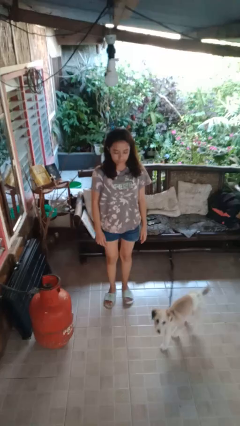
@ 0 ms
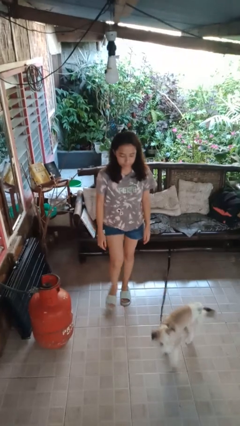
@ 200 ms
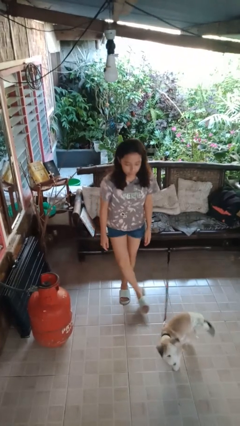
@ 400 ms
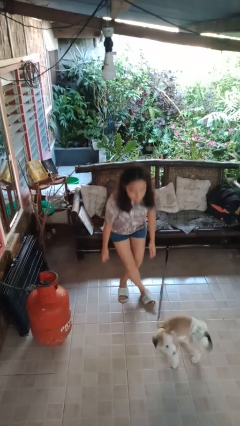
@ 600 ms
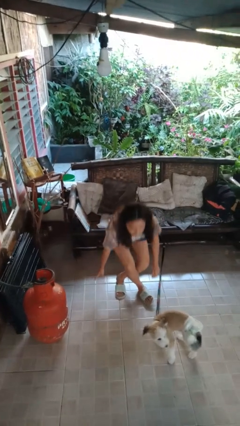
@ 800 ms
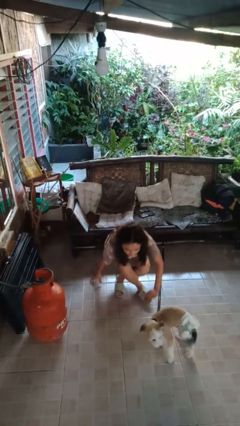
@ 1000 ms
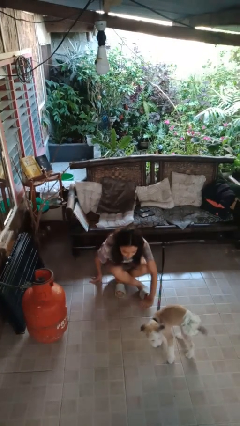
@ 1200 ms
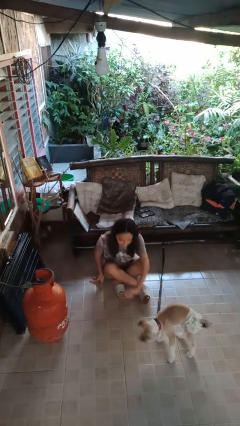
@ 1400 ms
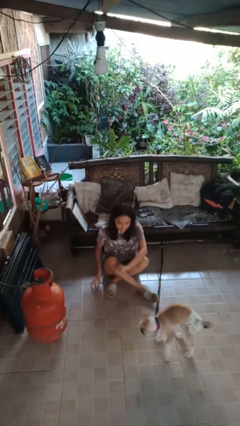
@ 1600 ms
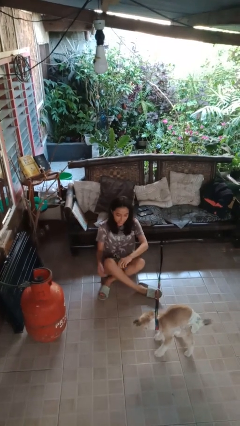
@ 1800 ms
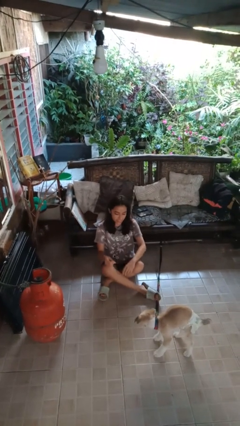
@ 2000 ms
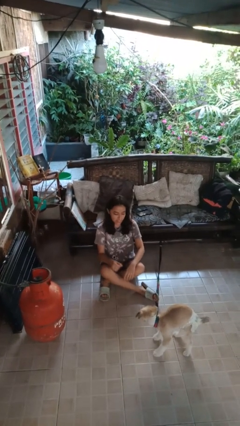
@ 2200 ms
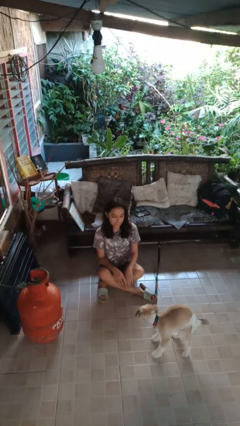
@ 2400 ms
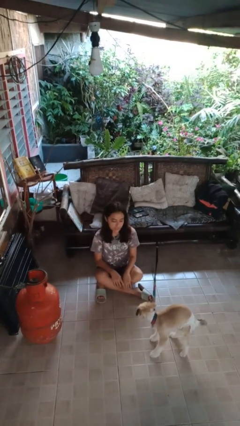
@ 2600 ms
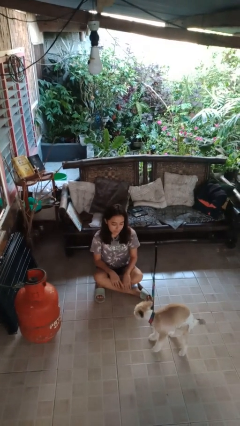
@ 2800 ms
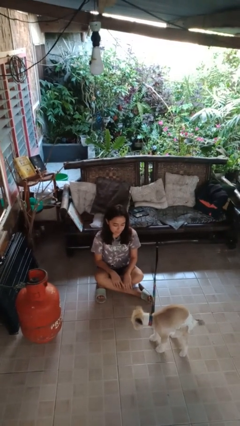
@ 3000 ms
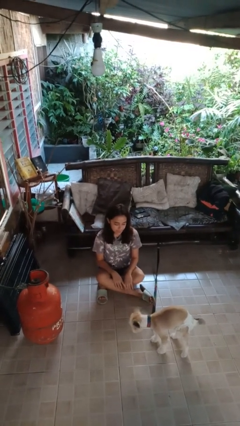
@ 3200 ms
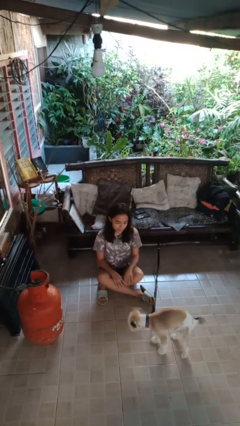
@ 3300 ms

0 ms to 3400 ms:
person sits crisscross

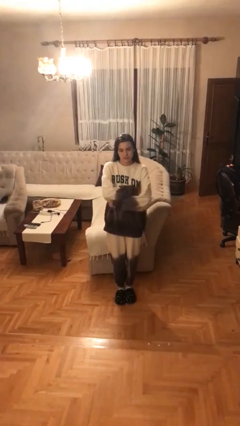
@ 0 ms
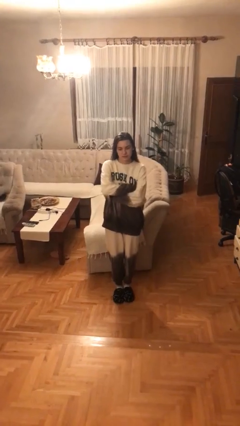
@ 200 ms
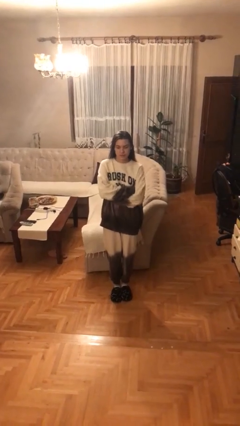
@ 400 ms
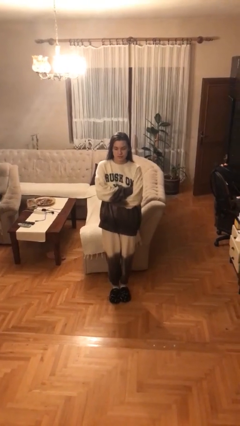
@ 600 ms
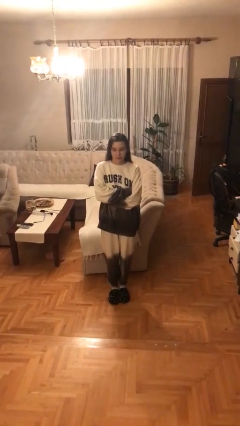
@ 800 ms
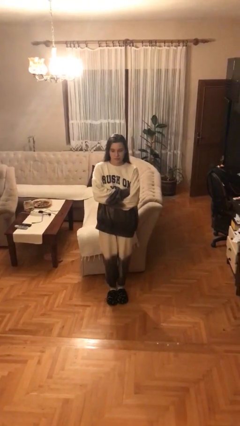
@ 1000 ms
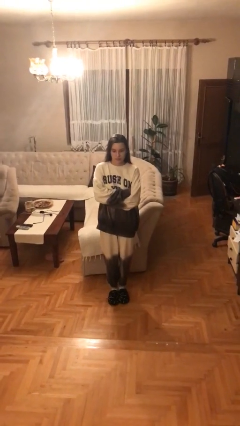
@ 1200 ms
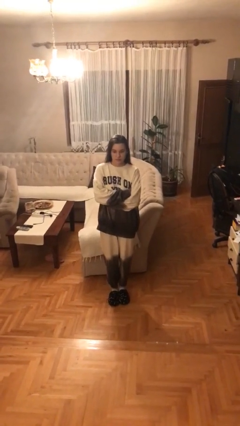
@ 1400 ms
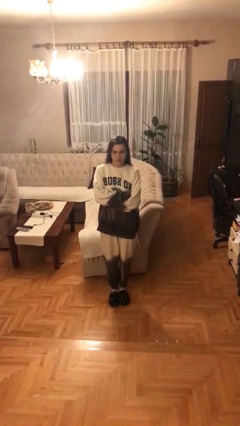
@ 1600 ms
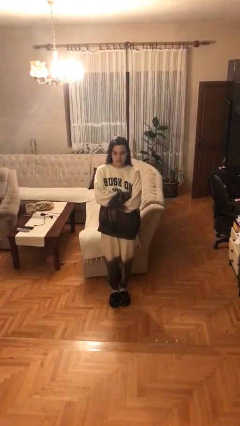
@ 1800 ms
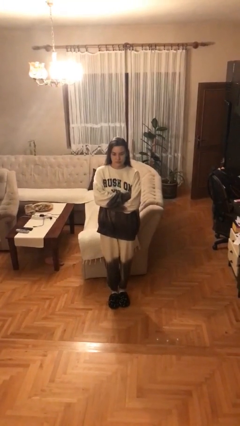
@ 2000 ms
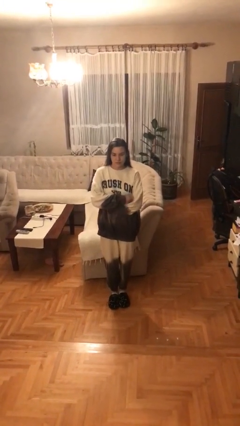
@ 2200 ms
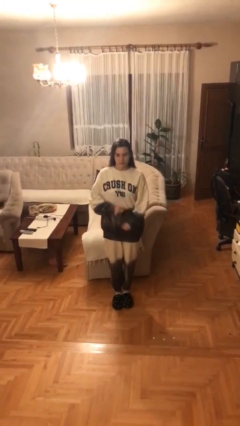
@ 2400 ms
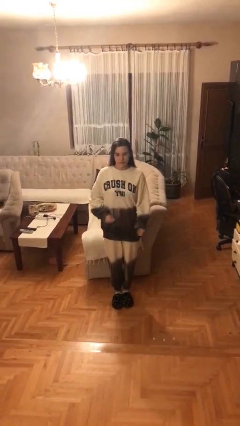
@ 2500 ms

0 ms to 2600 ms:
person crosses arms

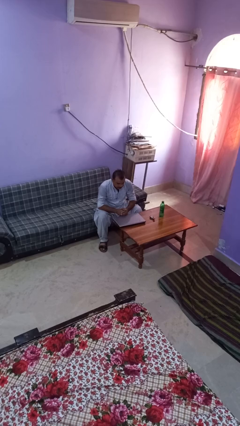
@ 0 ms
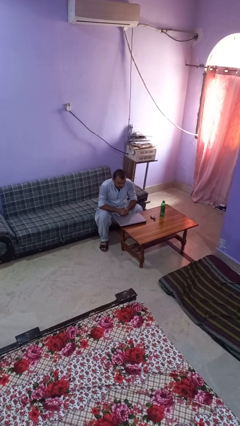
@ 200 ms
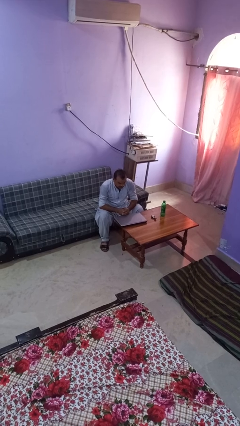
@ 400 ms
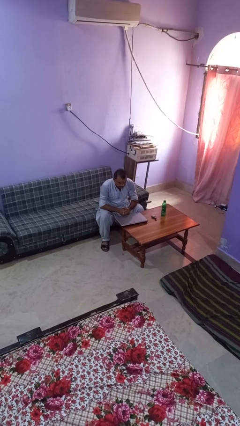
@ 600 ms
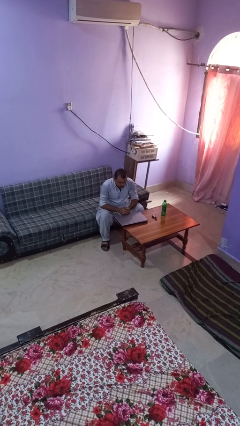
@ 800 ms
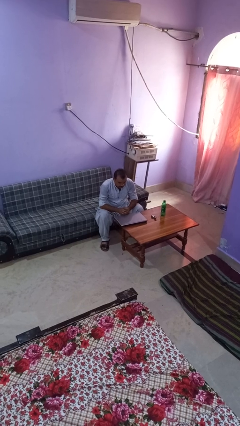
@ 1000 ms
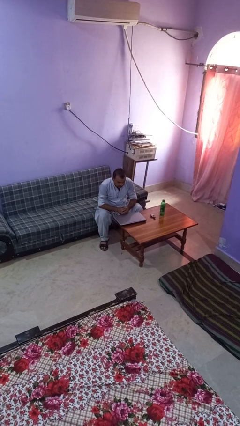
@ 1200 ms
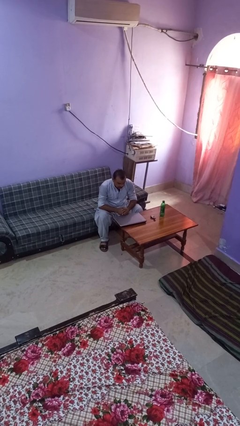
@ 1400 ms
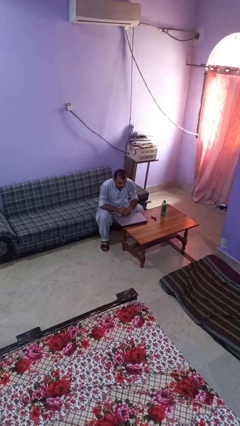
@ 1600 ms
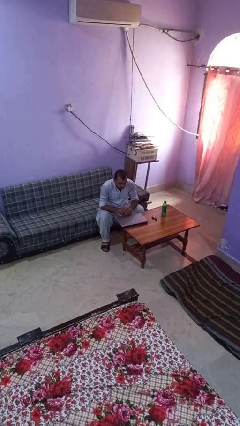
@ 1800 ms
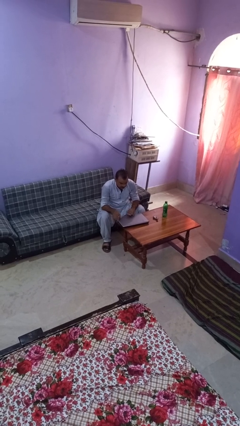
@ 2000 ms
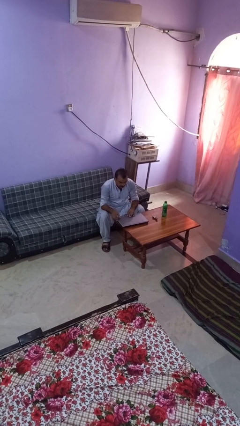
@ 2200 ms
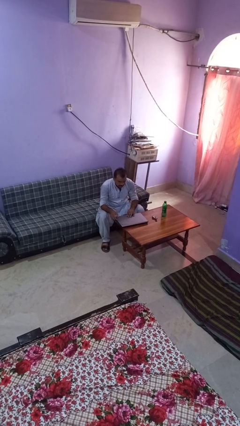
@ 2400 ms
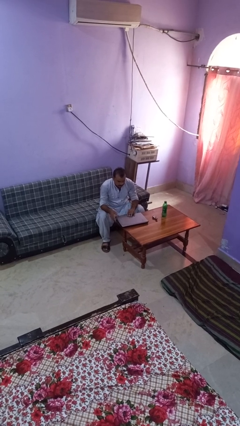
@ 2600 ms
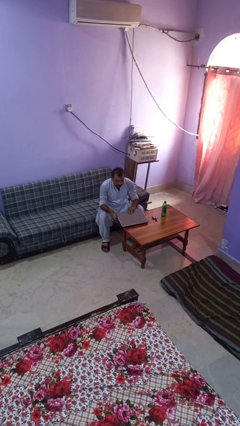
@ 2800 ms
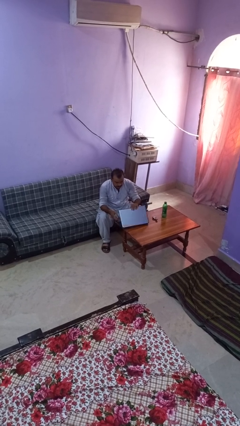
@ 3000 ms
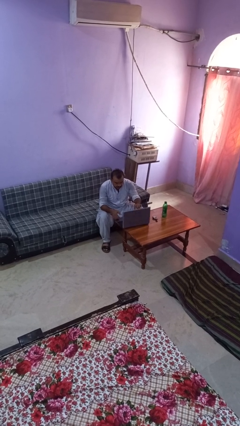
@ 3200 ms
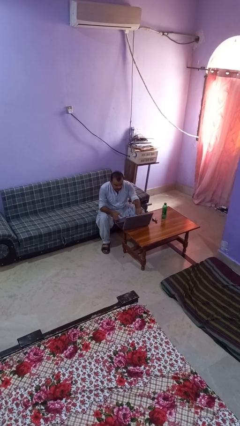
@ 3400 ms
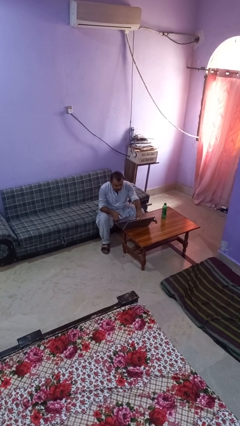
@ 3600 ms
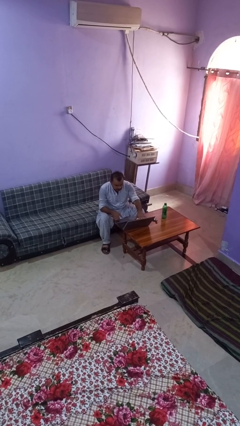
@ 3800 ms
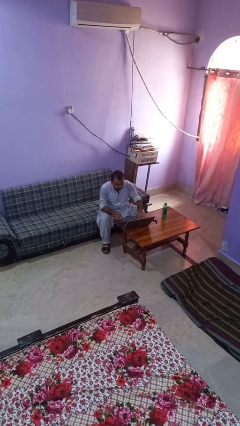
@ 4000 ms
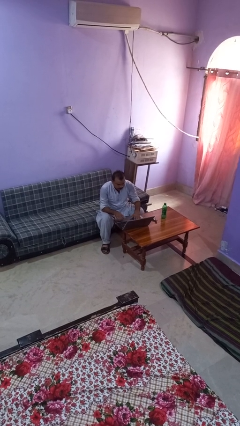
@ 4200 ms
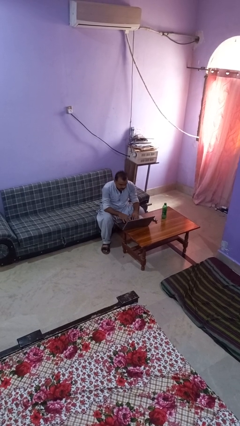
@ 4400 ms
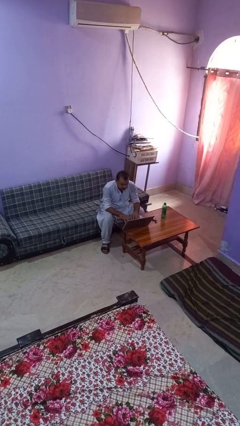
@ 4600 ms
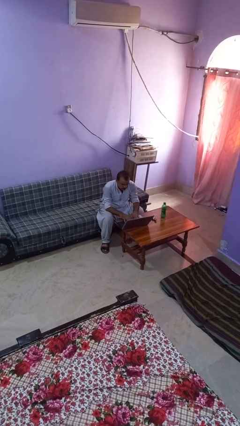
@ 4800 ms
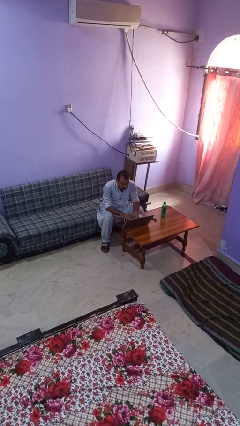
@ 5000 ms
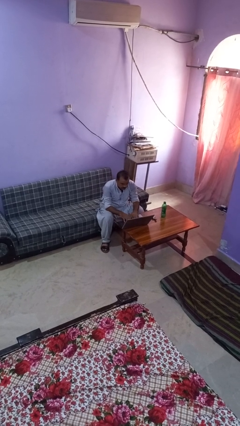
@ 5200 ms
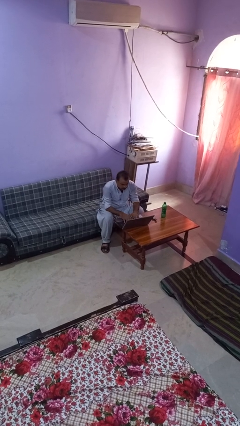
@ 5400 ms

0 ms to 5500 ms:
person opens laptop

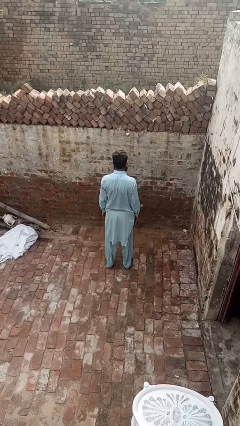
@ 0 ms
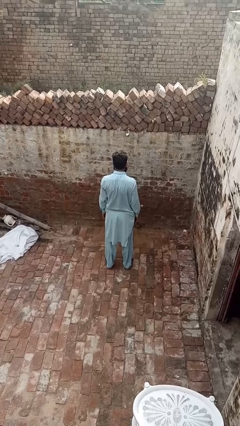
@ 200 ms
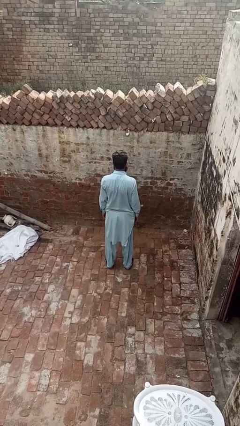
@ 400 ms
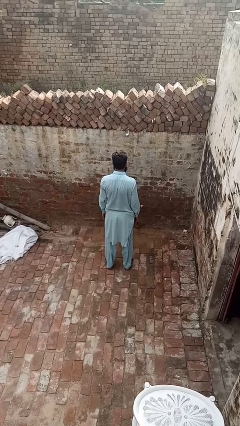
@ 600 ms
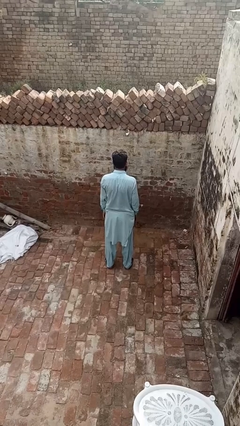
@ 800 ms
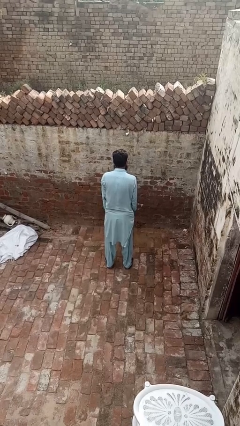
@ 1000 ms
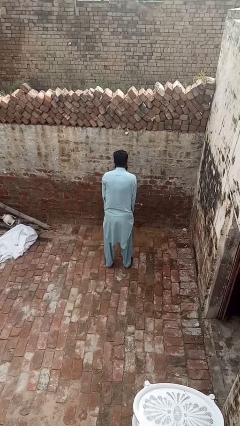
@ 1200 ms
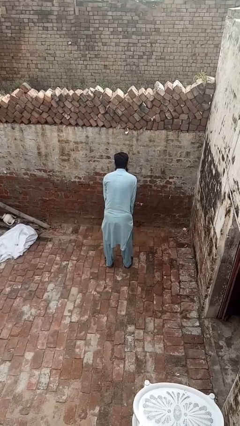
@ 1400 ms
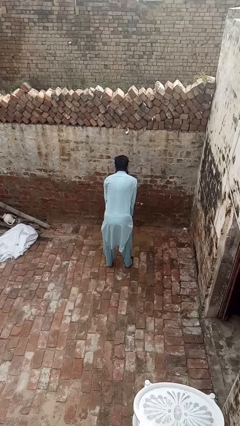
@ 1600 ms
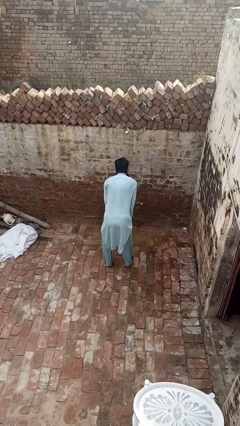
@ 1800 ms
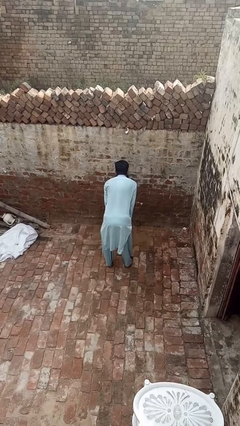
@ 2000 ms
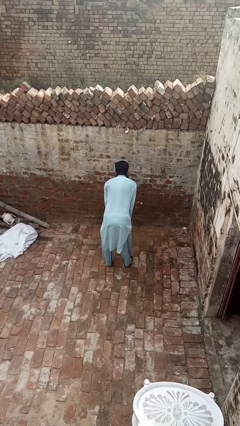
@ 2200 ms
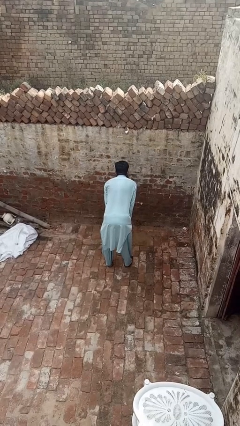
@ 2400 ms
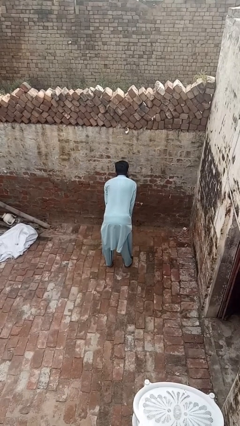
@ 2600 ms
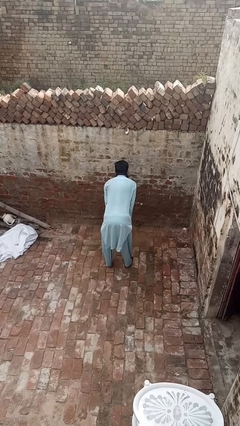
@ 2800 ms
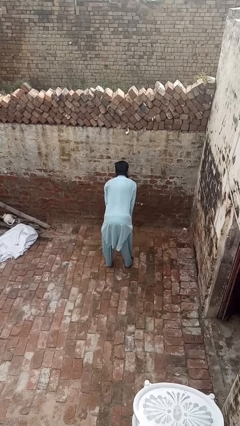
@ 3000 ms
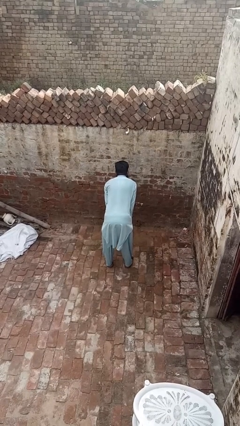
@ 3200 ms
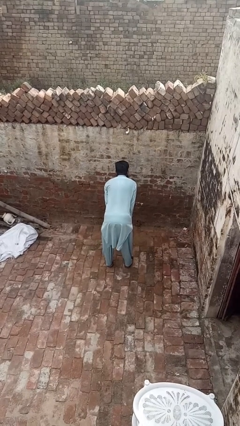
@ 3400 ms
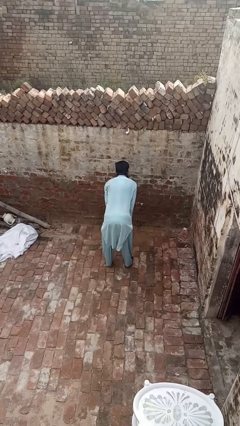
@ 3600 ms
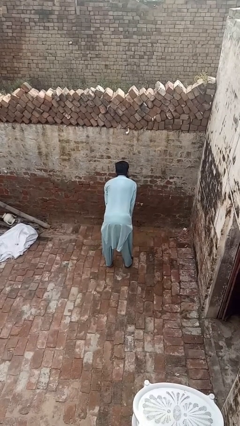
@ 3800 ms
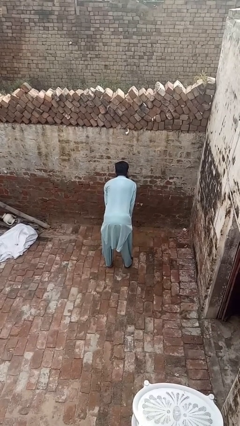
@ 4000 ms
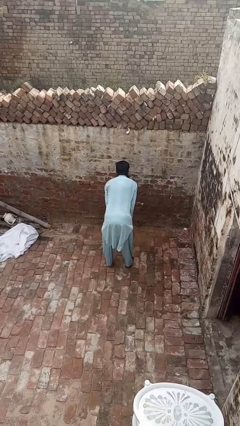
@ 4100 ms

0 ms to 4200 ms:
person slaps hands on thighs

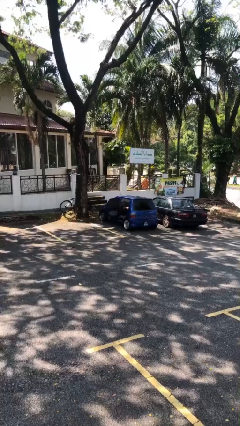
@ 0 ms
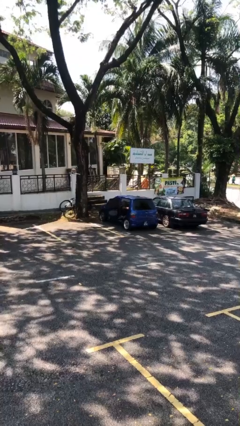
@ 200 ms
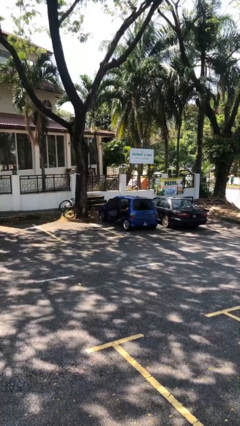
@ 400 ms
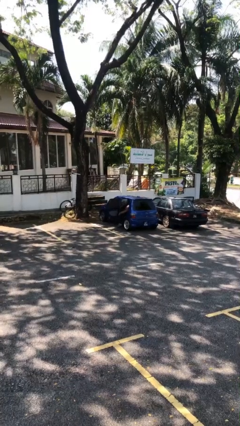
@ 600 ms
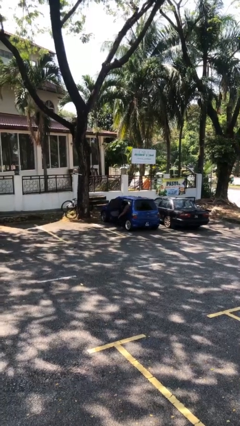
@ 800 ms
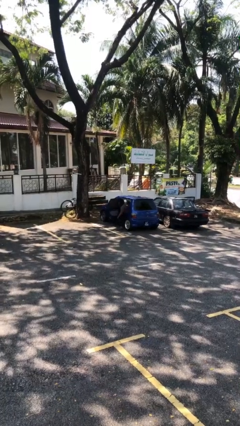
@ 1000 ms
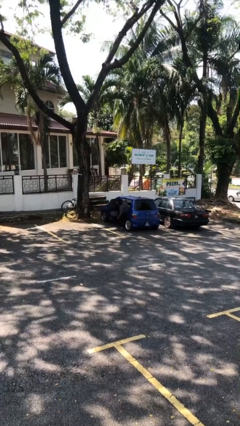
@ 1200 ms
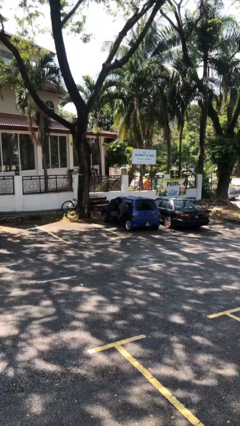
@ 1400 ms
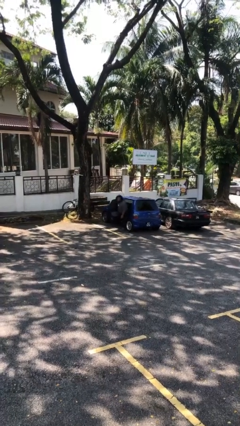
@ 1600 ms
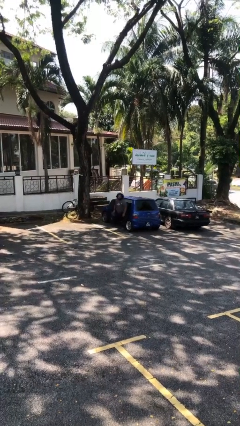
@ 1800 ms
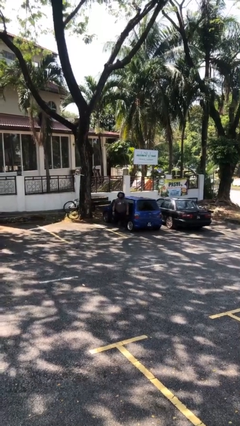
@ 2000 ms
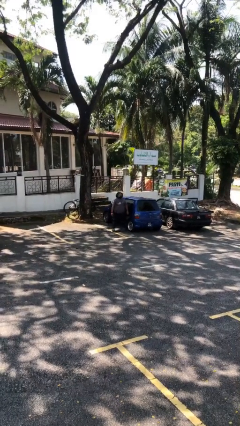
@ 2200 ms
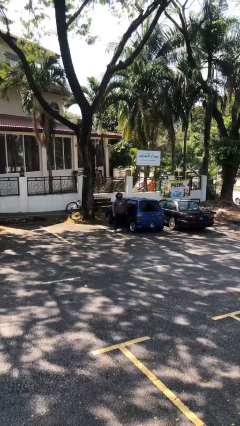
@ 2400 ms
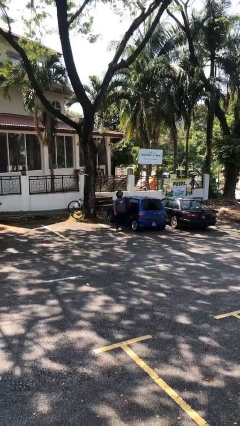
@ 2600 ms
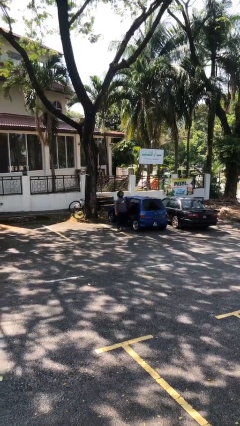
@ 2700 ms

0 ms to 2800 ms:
person exits car
